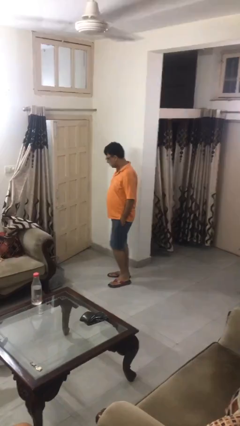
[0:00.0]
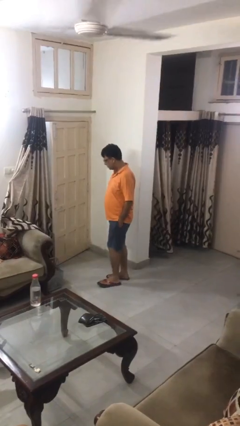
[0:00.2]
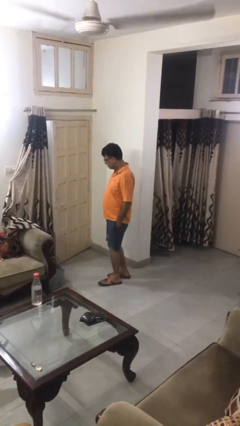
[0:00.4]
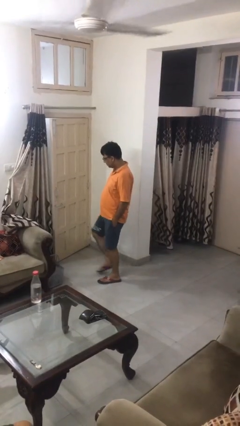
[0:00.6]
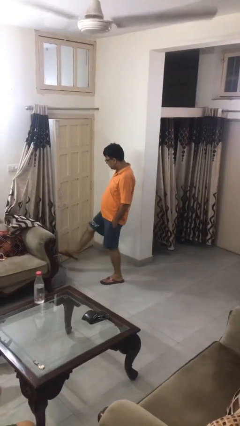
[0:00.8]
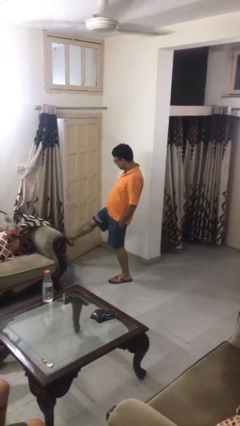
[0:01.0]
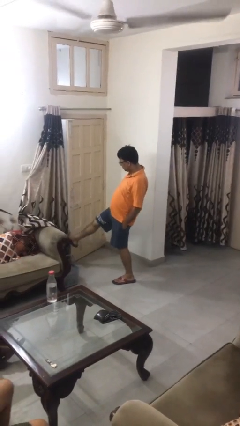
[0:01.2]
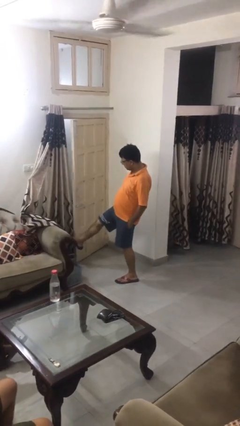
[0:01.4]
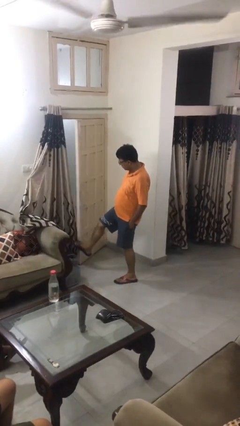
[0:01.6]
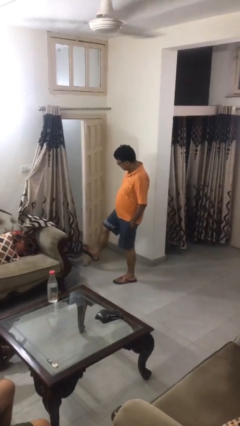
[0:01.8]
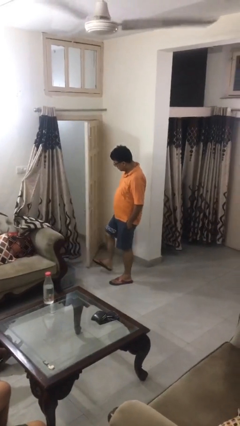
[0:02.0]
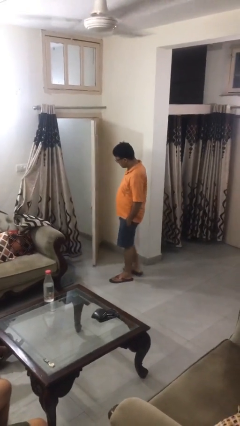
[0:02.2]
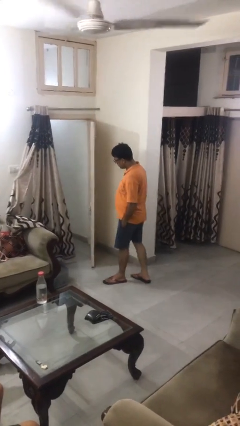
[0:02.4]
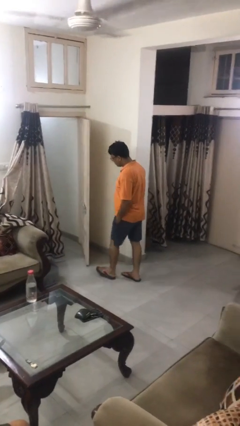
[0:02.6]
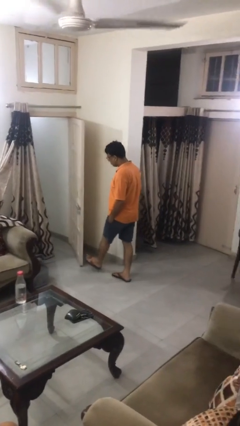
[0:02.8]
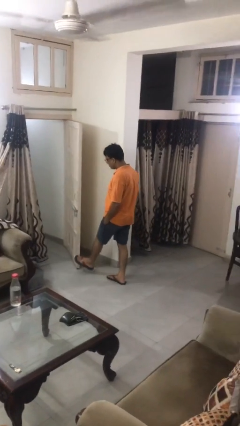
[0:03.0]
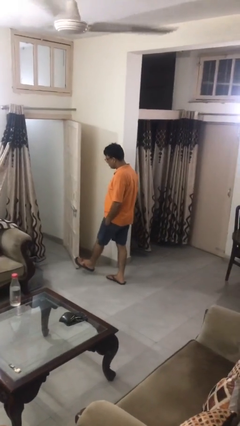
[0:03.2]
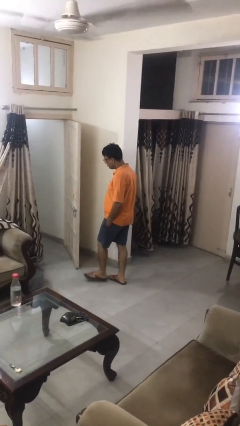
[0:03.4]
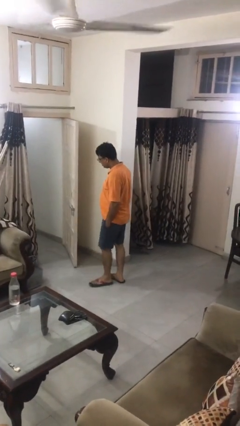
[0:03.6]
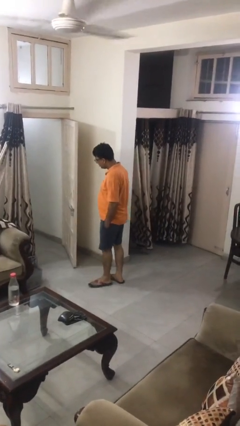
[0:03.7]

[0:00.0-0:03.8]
person opens facility door

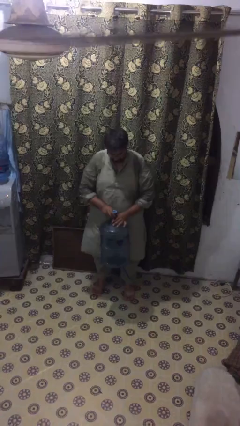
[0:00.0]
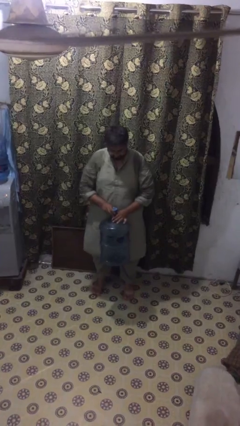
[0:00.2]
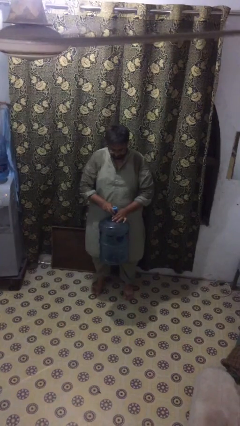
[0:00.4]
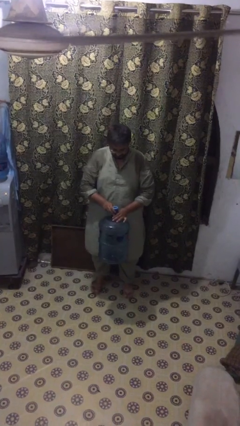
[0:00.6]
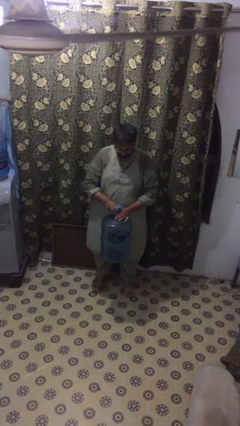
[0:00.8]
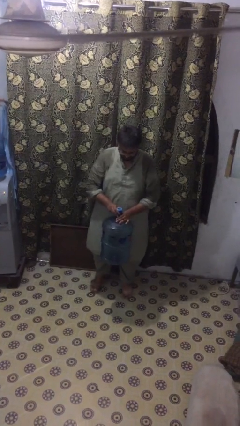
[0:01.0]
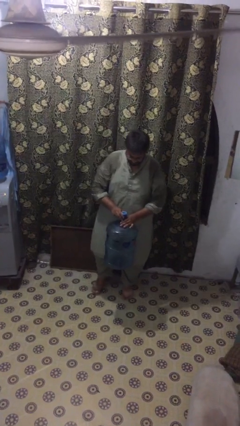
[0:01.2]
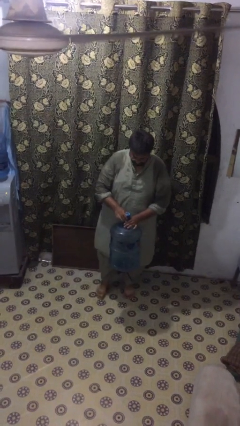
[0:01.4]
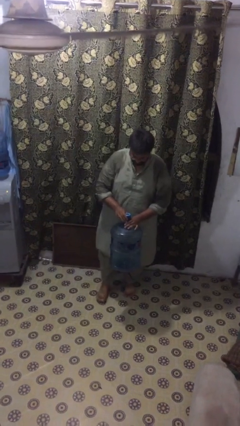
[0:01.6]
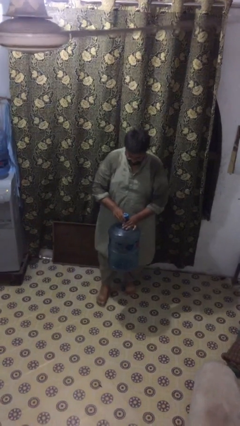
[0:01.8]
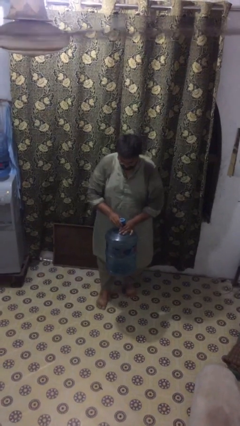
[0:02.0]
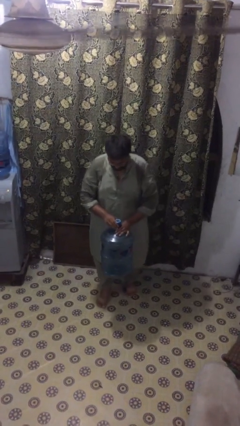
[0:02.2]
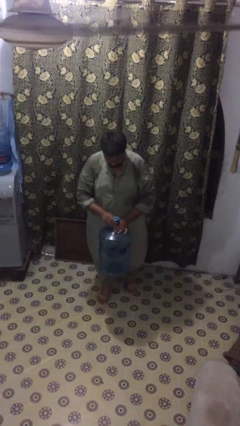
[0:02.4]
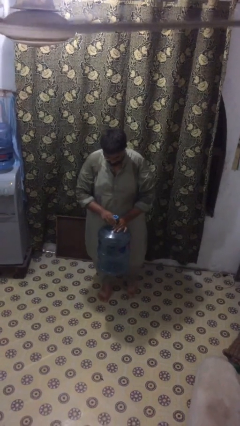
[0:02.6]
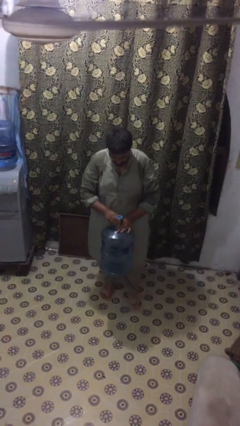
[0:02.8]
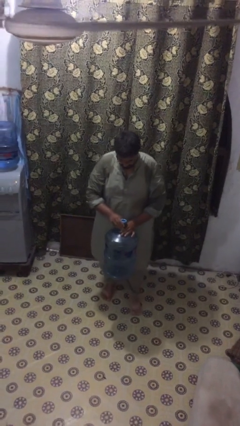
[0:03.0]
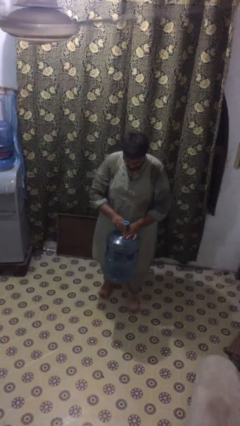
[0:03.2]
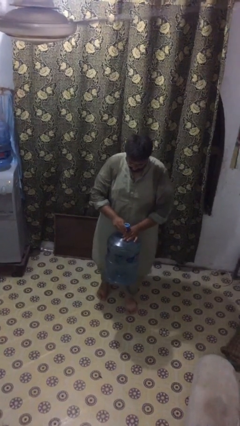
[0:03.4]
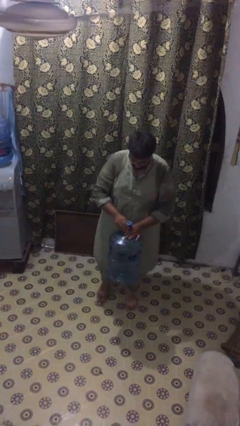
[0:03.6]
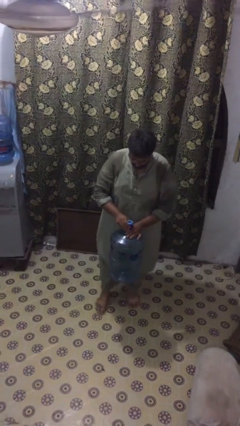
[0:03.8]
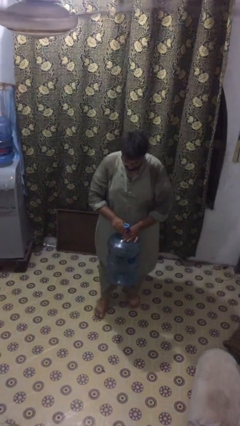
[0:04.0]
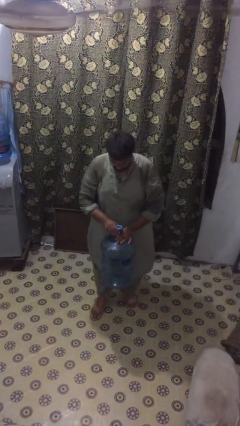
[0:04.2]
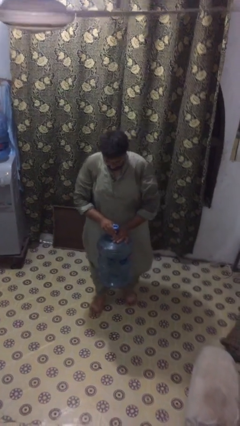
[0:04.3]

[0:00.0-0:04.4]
person carries heavy object

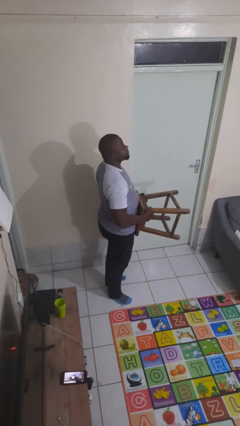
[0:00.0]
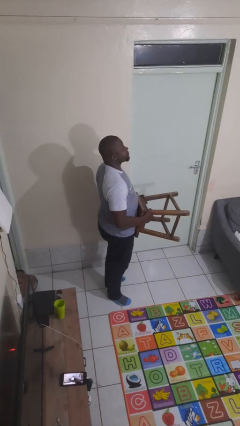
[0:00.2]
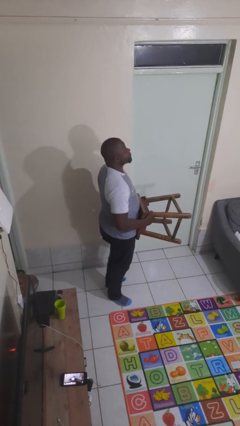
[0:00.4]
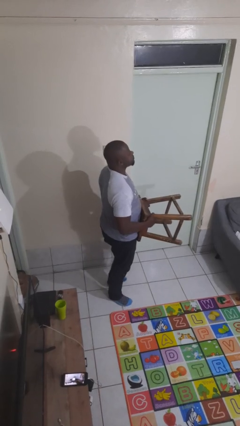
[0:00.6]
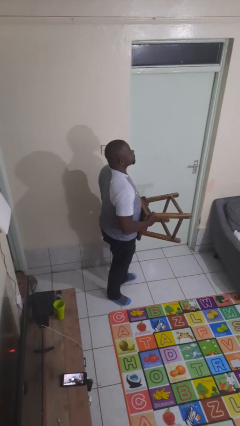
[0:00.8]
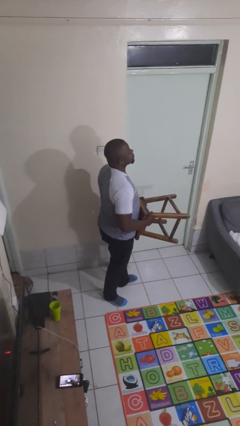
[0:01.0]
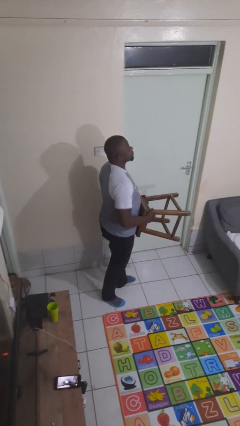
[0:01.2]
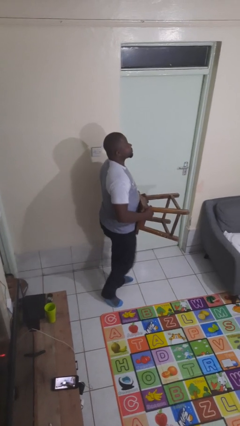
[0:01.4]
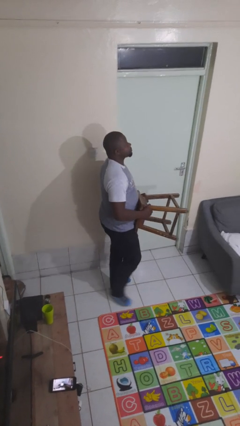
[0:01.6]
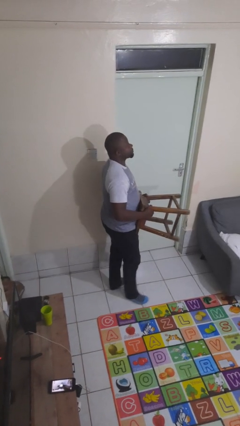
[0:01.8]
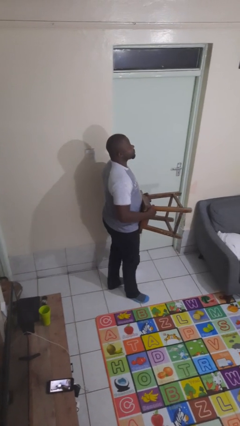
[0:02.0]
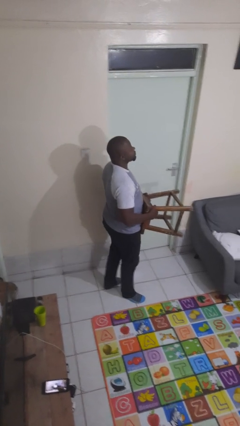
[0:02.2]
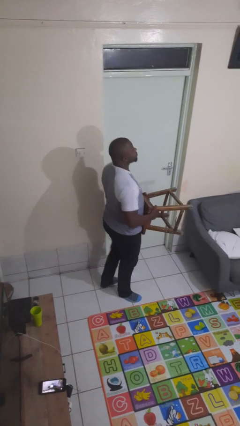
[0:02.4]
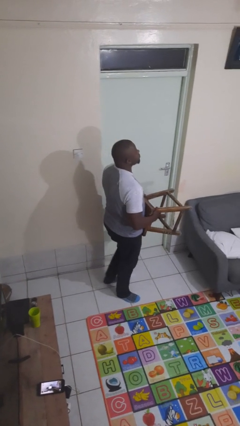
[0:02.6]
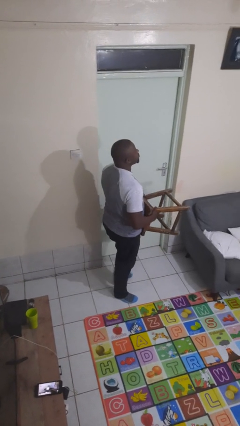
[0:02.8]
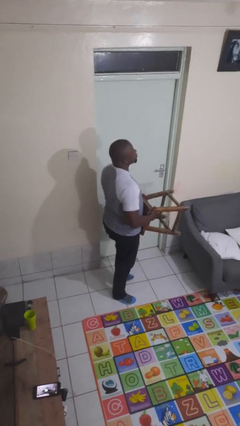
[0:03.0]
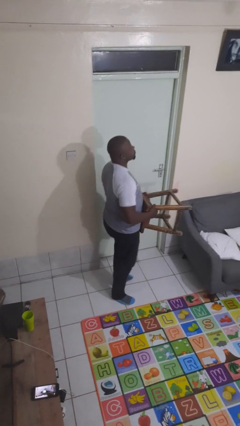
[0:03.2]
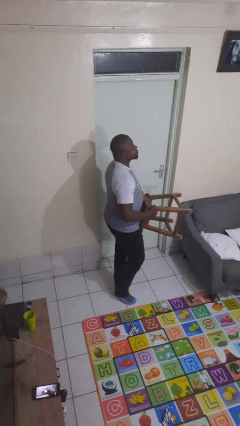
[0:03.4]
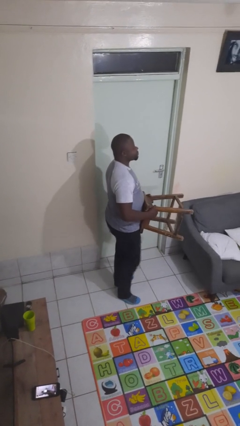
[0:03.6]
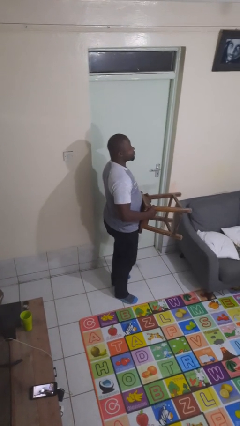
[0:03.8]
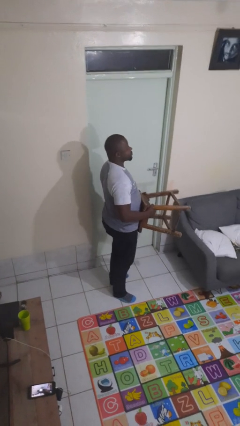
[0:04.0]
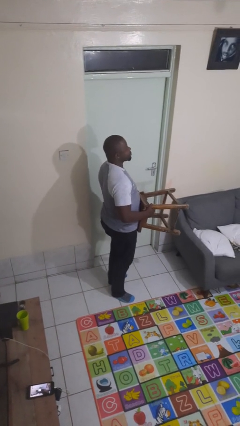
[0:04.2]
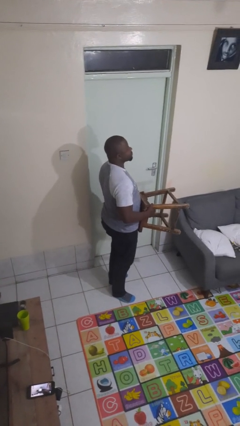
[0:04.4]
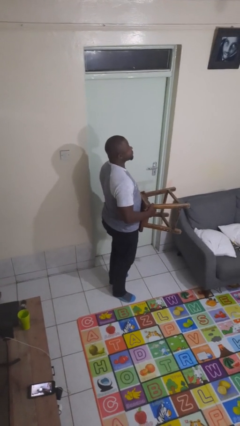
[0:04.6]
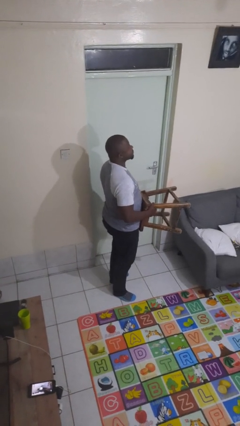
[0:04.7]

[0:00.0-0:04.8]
person carries furniture

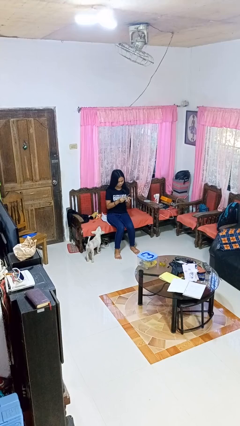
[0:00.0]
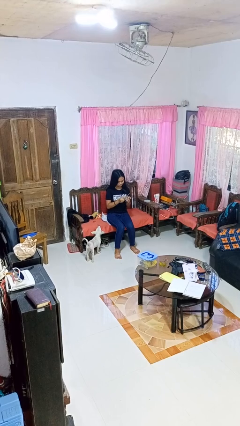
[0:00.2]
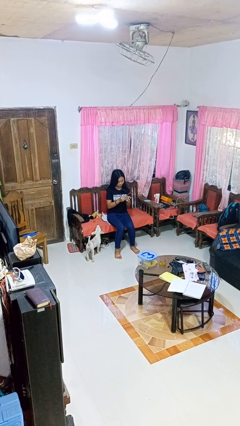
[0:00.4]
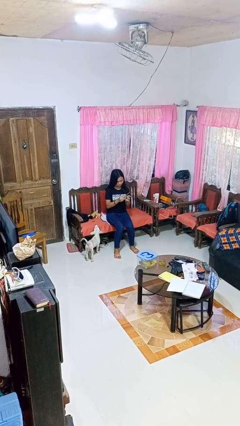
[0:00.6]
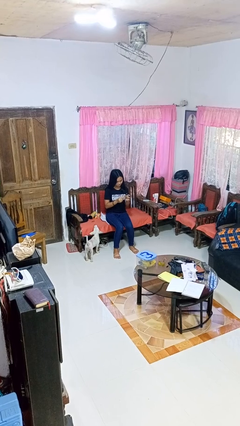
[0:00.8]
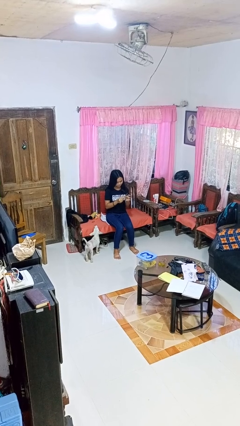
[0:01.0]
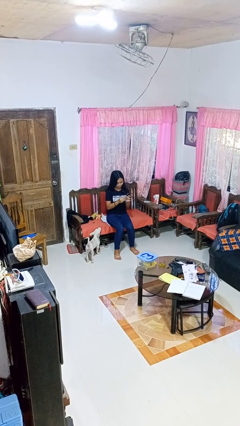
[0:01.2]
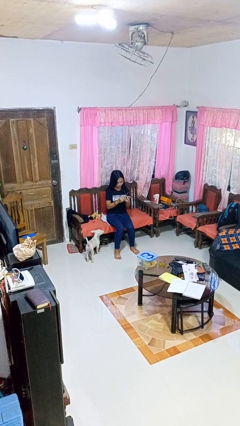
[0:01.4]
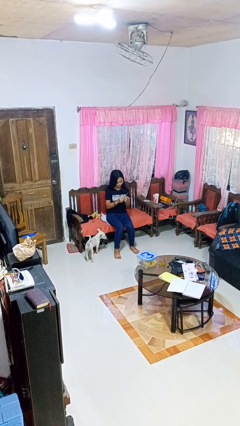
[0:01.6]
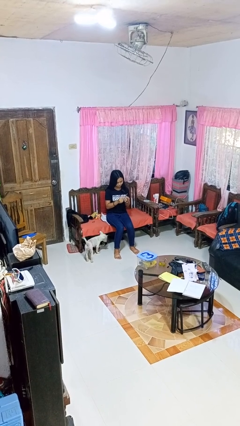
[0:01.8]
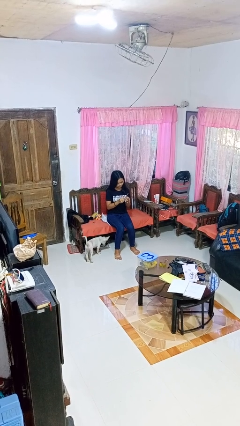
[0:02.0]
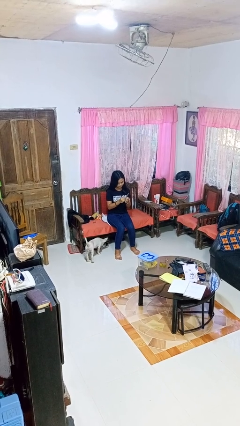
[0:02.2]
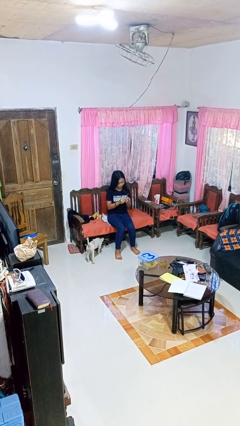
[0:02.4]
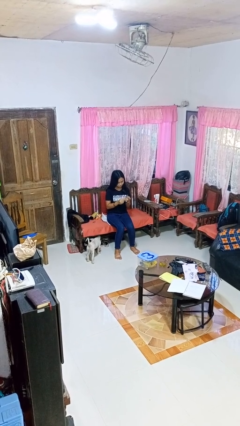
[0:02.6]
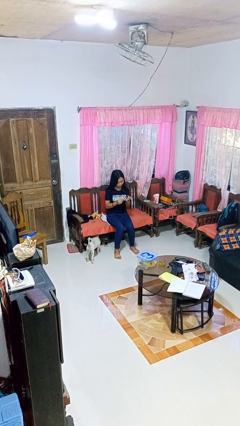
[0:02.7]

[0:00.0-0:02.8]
person files fingernails

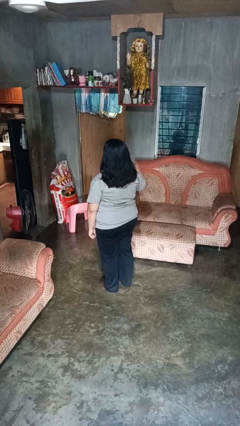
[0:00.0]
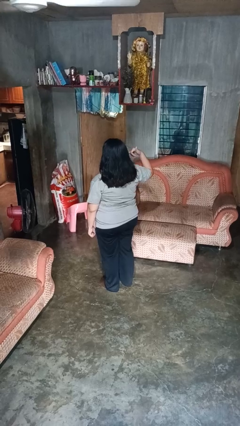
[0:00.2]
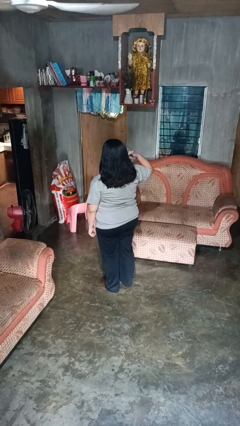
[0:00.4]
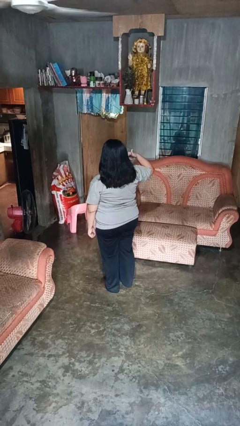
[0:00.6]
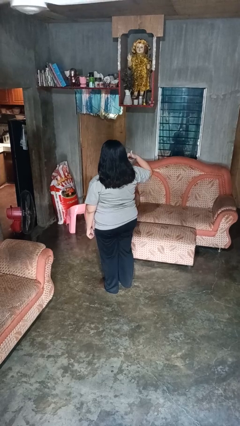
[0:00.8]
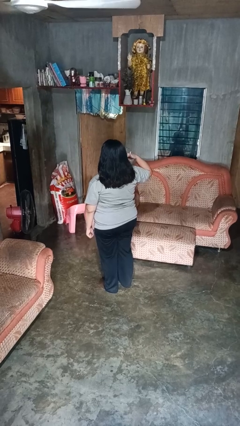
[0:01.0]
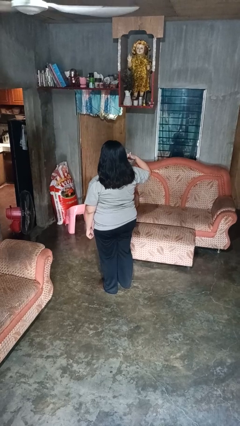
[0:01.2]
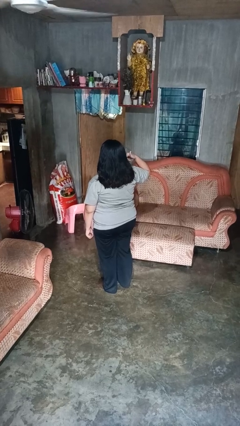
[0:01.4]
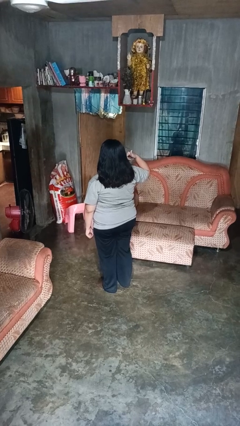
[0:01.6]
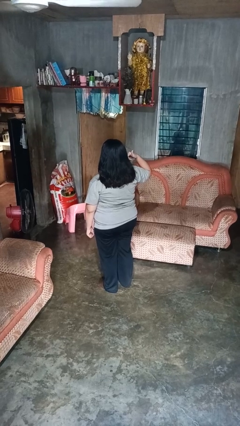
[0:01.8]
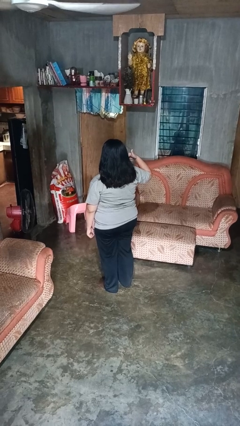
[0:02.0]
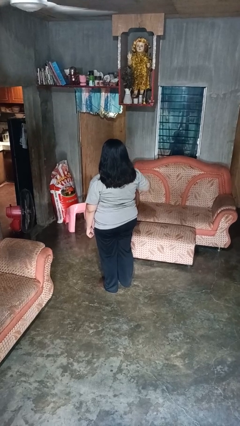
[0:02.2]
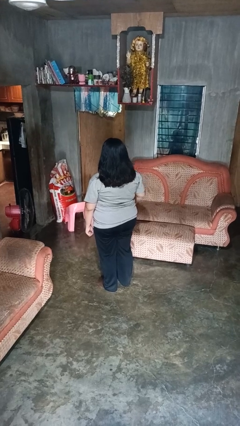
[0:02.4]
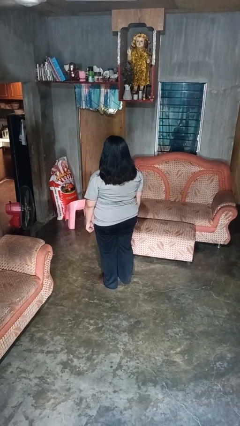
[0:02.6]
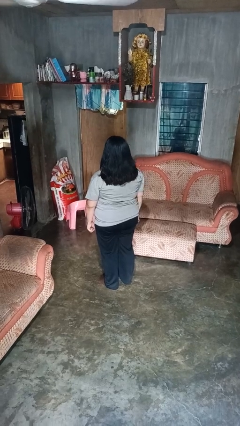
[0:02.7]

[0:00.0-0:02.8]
person gestures call me
